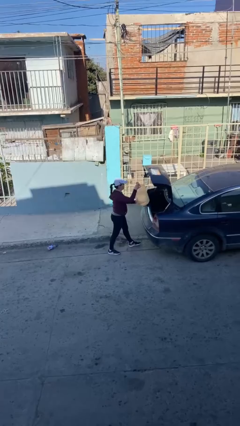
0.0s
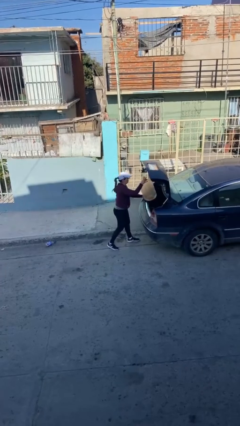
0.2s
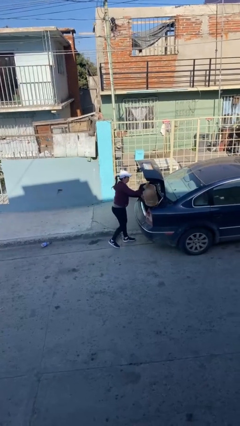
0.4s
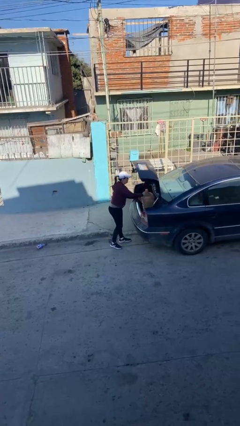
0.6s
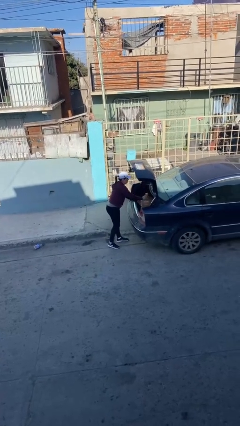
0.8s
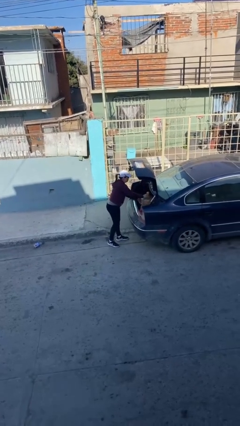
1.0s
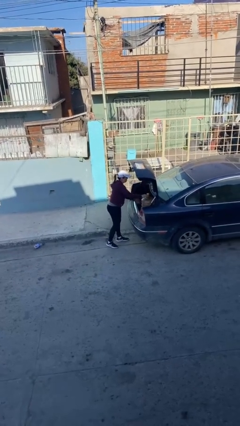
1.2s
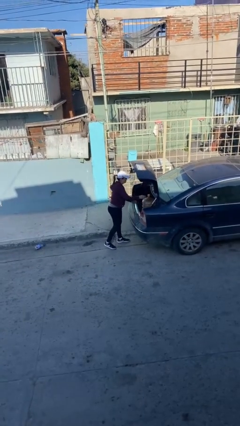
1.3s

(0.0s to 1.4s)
person loads car

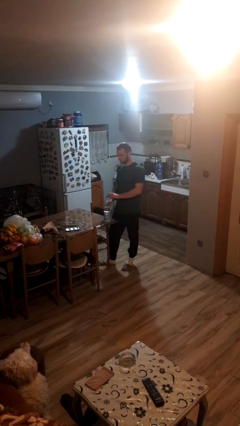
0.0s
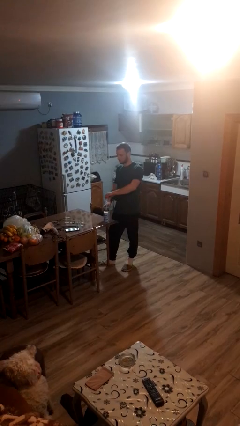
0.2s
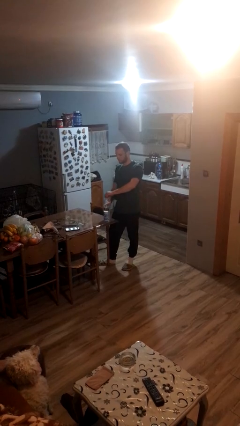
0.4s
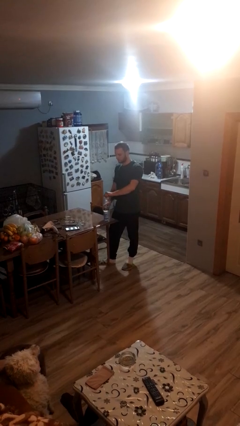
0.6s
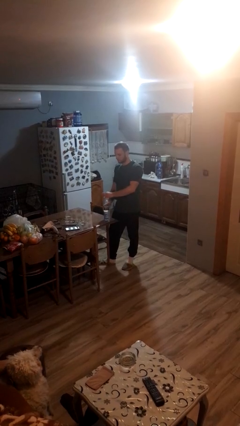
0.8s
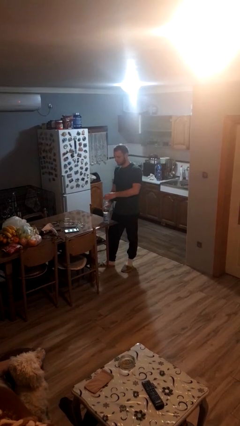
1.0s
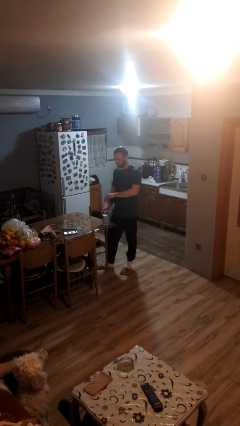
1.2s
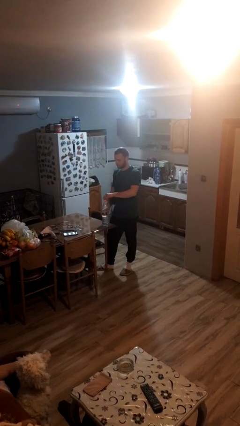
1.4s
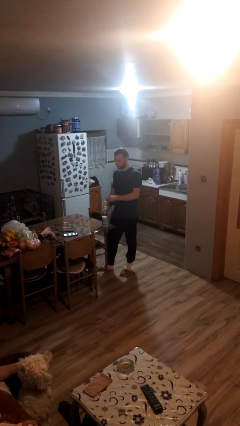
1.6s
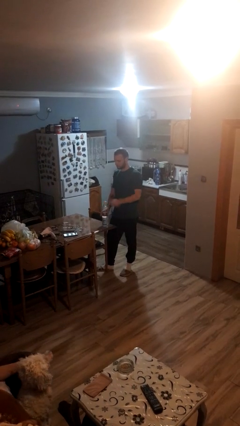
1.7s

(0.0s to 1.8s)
person unscrews lid from bottle

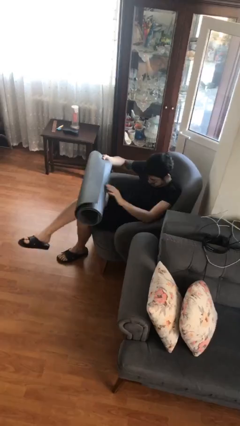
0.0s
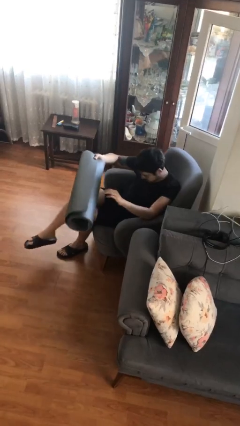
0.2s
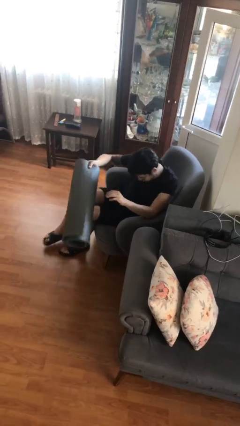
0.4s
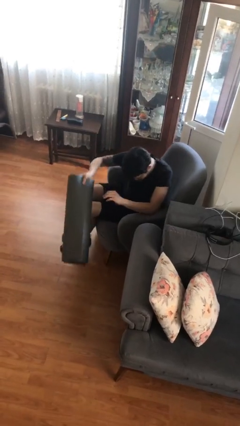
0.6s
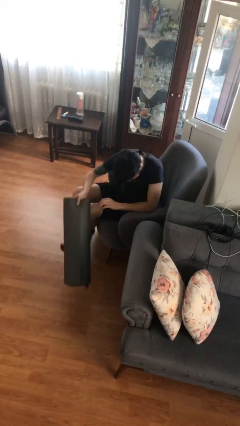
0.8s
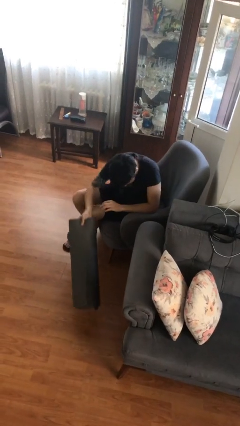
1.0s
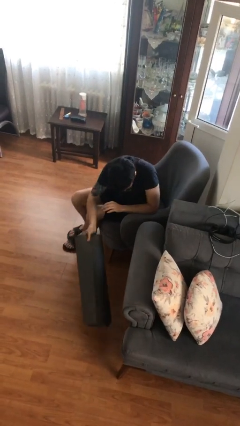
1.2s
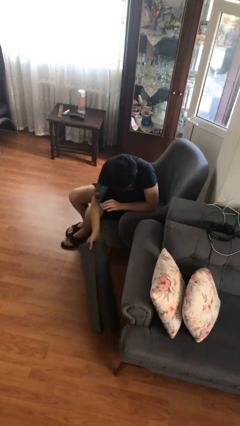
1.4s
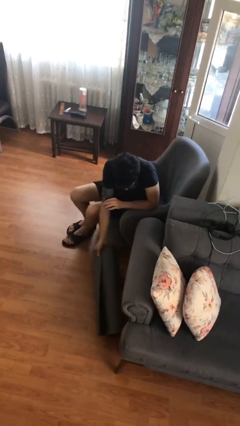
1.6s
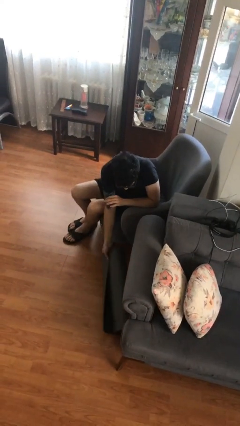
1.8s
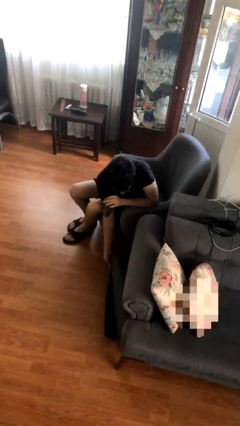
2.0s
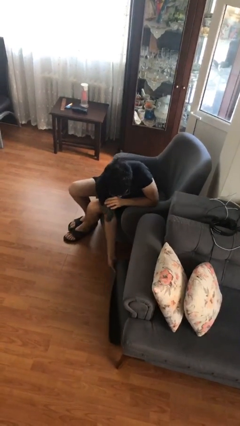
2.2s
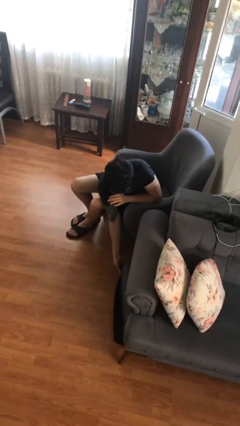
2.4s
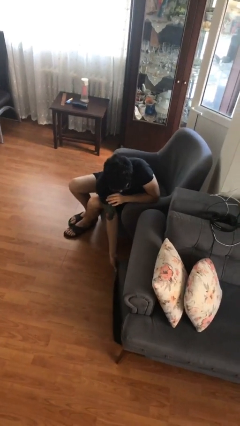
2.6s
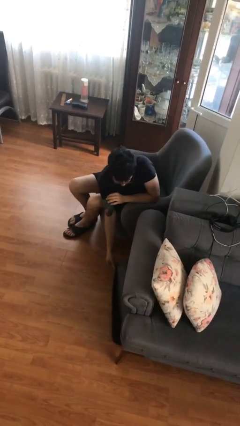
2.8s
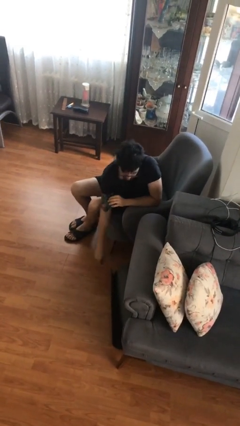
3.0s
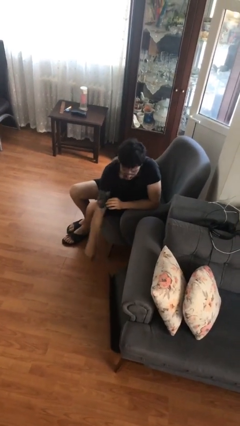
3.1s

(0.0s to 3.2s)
person puts down object on floor

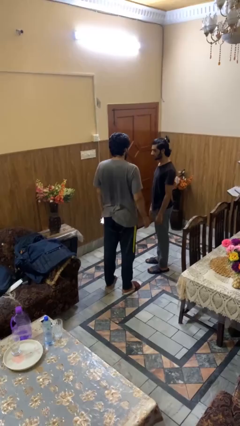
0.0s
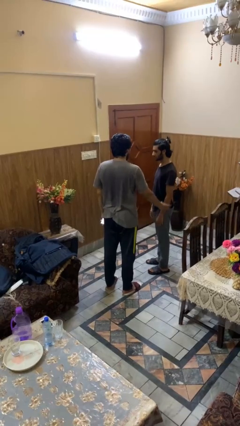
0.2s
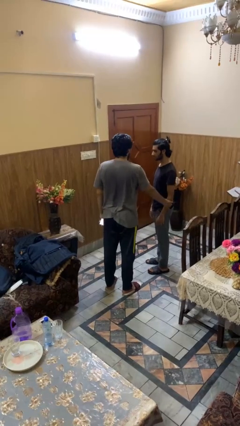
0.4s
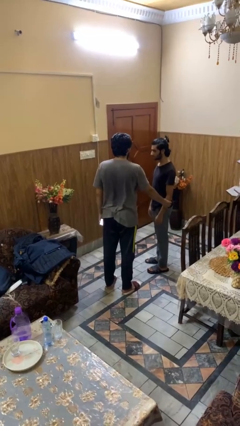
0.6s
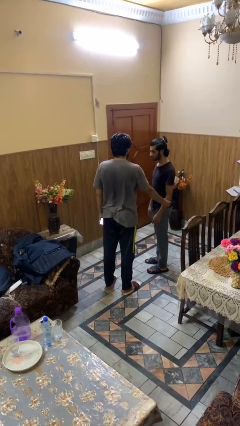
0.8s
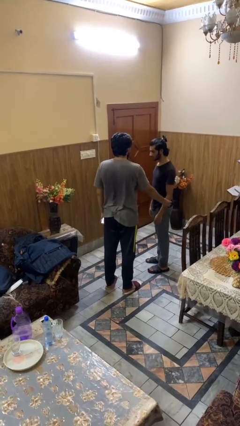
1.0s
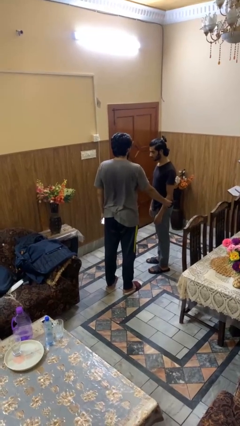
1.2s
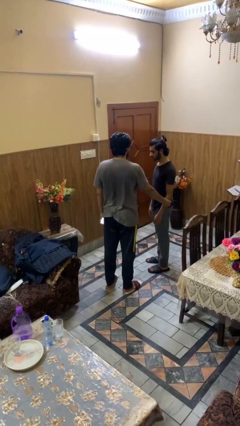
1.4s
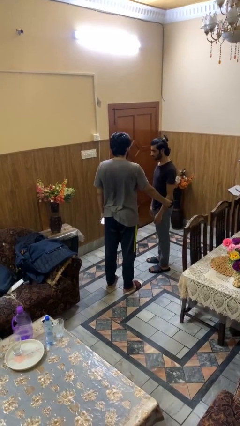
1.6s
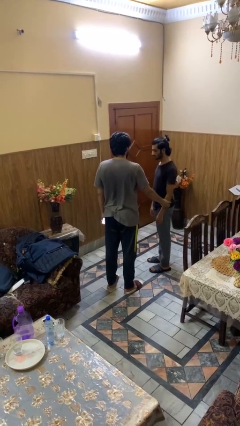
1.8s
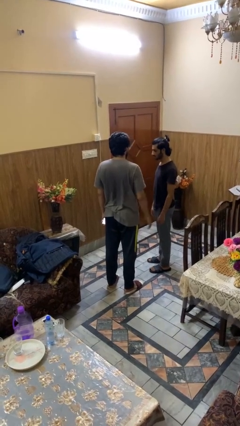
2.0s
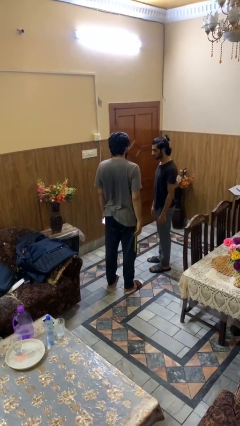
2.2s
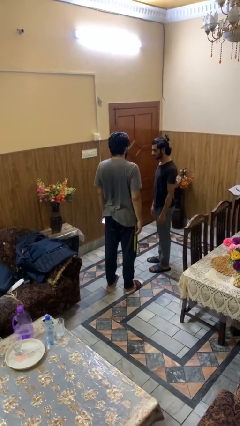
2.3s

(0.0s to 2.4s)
person grabs person by forearm

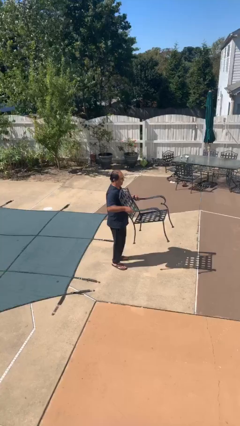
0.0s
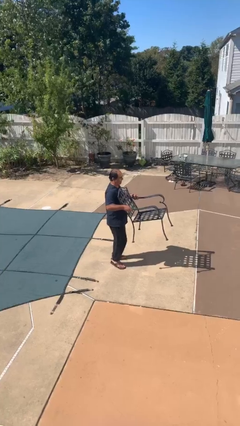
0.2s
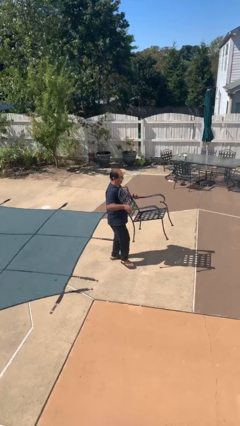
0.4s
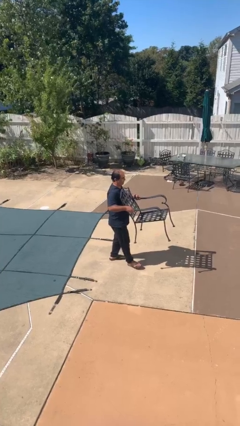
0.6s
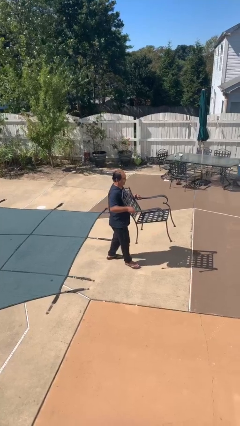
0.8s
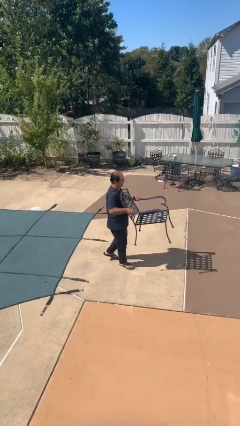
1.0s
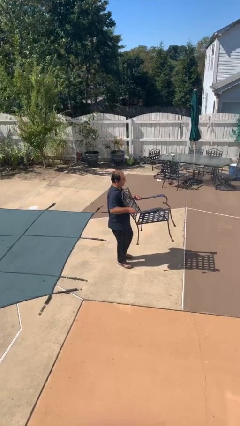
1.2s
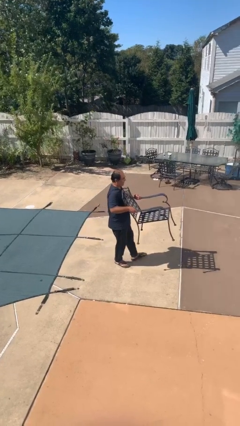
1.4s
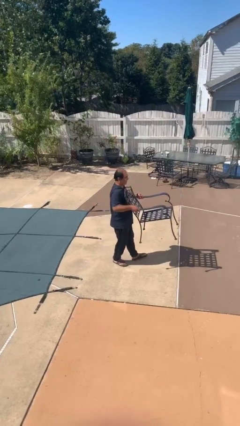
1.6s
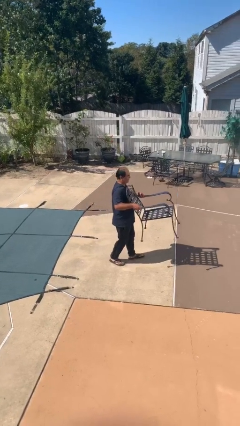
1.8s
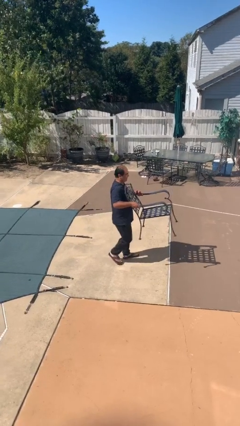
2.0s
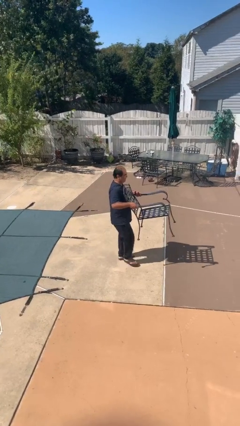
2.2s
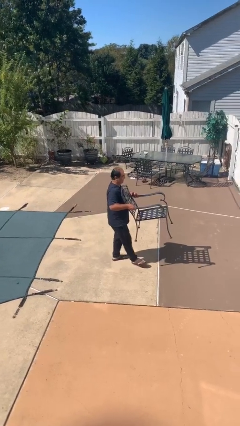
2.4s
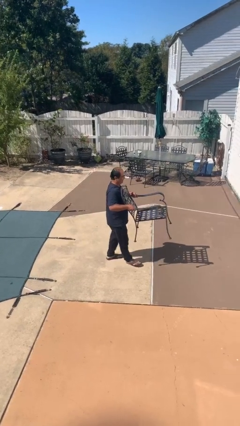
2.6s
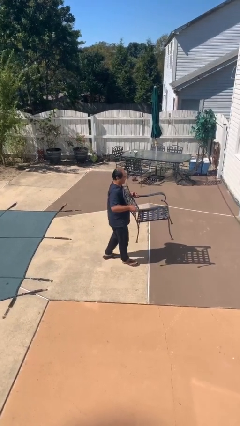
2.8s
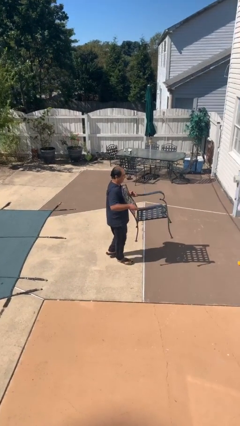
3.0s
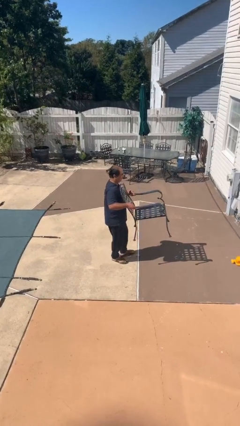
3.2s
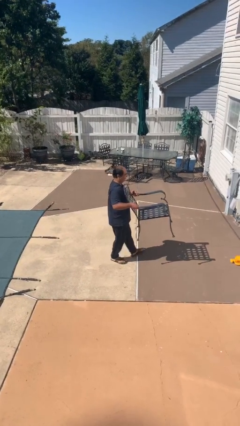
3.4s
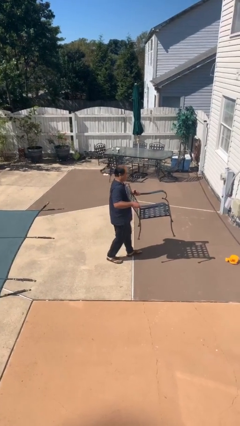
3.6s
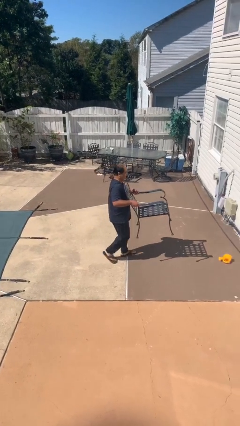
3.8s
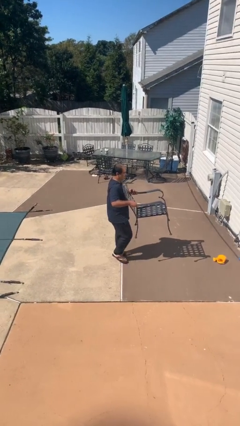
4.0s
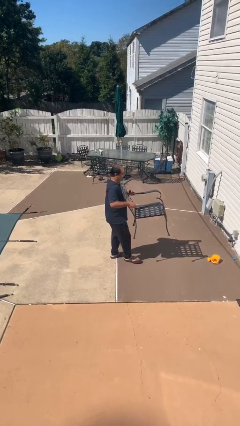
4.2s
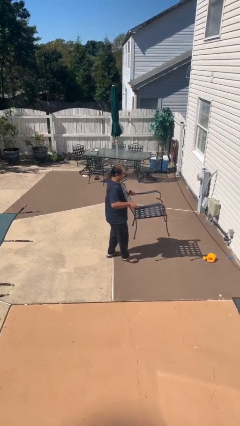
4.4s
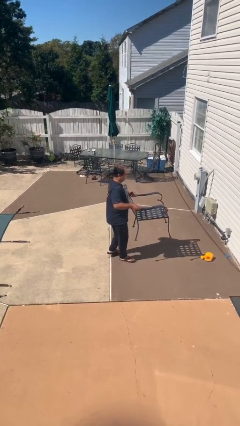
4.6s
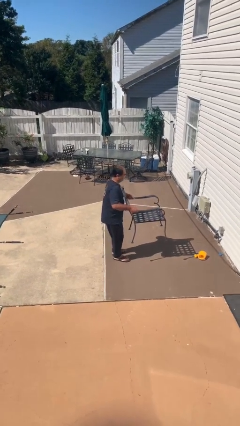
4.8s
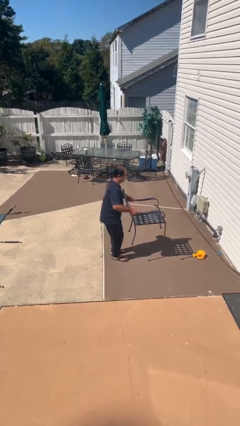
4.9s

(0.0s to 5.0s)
person carries heavy object

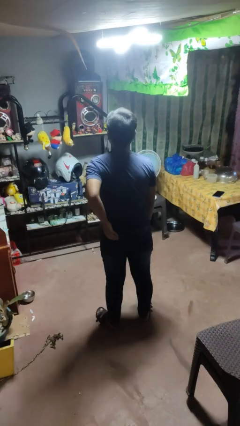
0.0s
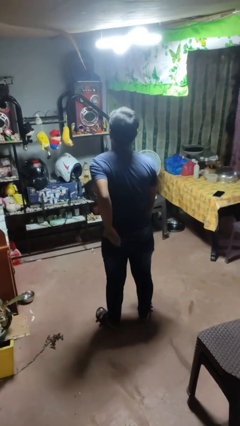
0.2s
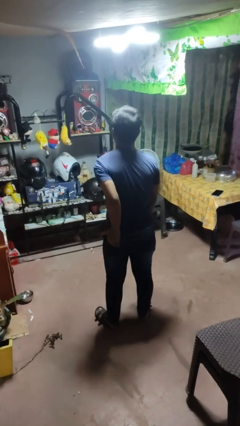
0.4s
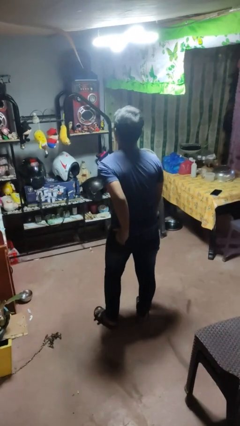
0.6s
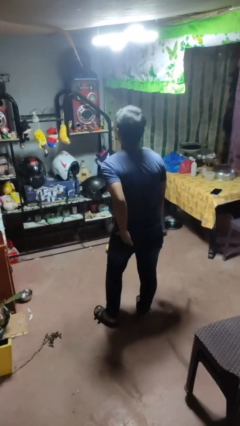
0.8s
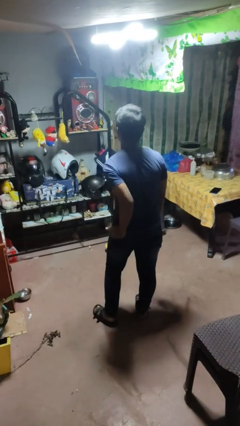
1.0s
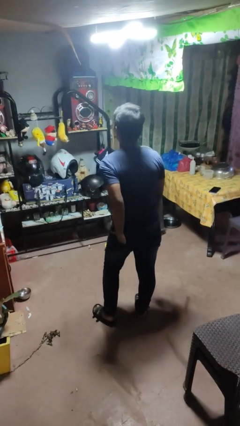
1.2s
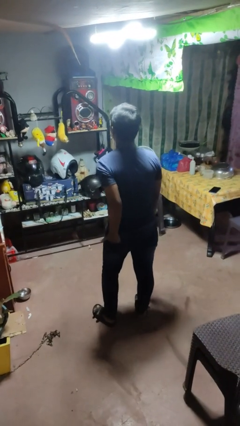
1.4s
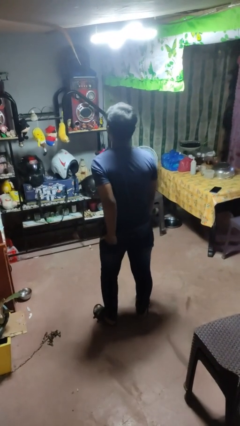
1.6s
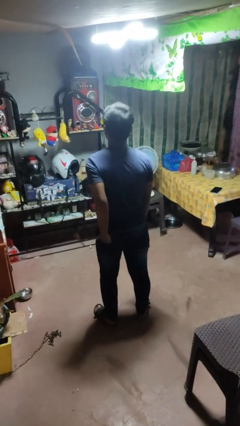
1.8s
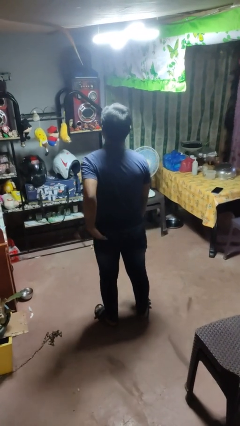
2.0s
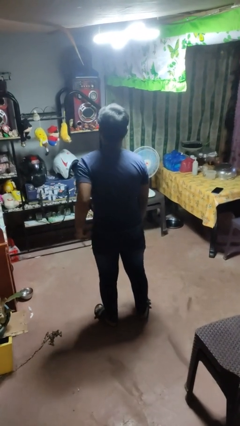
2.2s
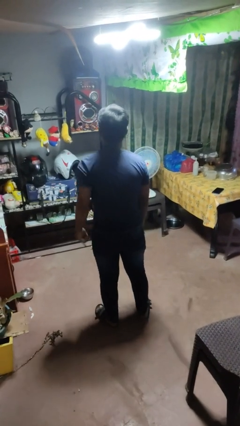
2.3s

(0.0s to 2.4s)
person puts hands in back pockets

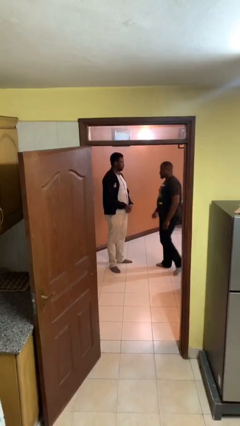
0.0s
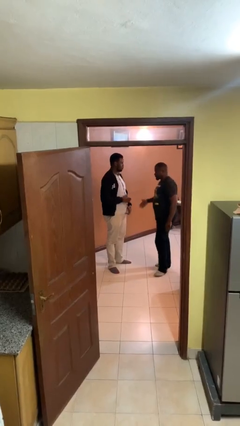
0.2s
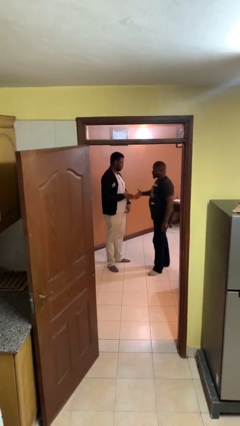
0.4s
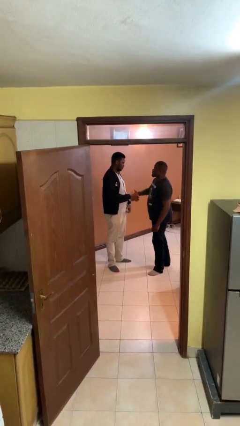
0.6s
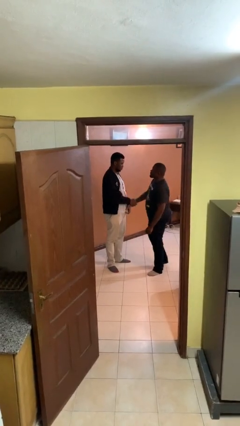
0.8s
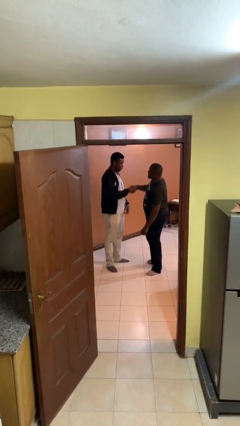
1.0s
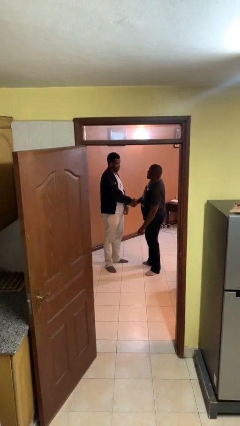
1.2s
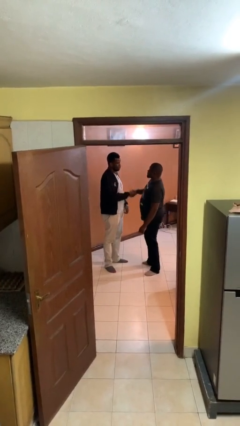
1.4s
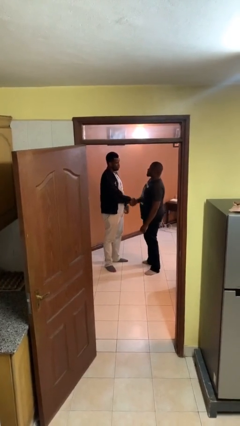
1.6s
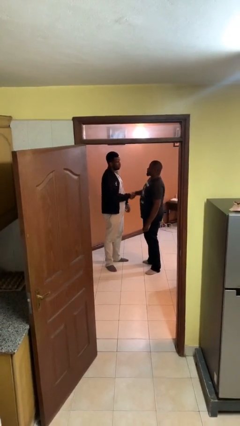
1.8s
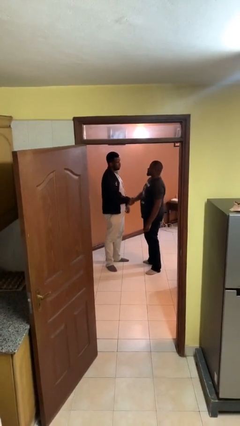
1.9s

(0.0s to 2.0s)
person shakes hand
